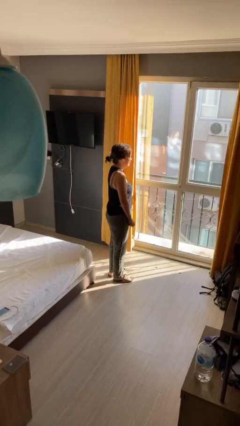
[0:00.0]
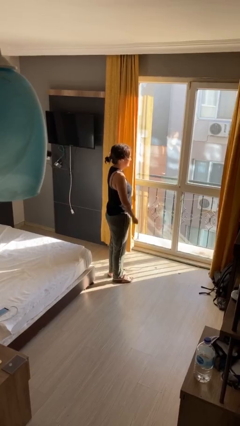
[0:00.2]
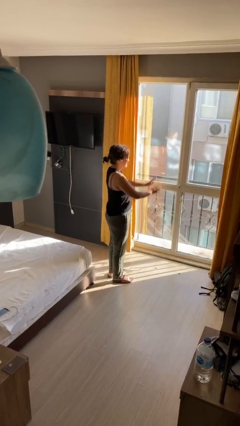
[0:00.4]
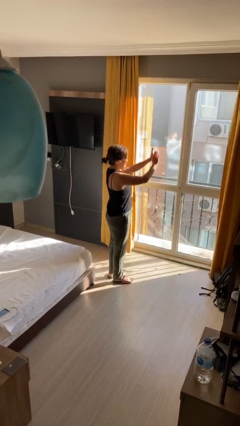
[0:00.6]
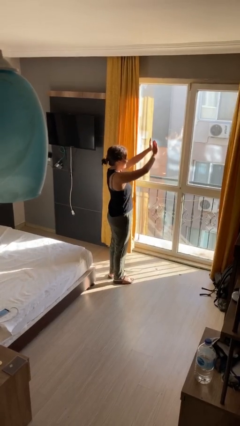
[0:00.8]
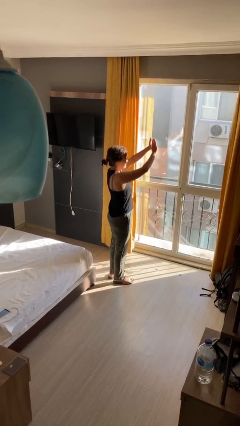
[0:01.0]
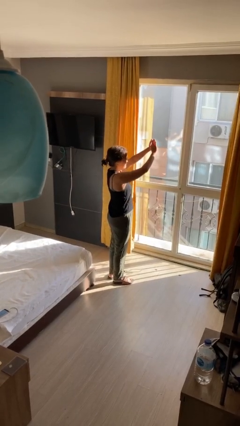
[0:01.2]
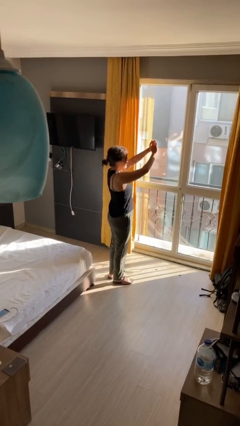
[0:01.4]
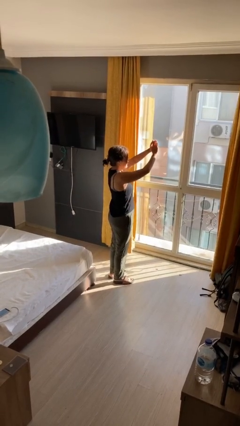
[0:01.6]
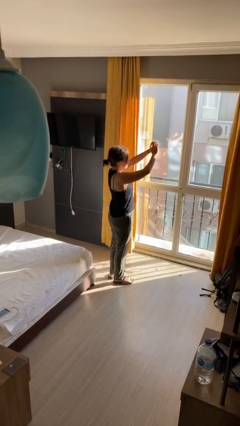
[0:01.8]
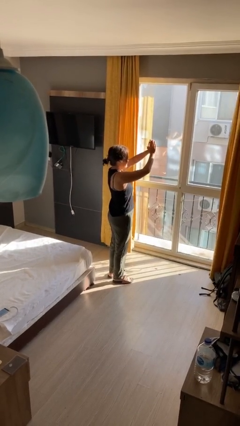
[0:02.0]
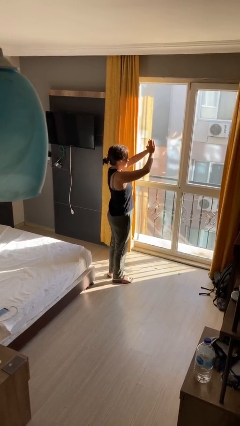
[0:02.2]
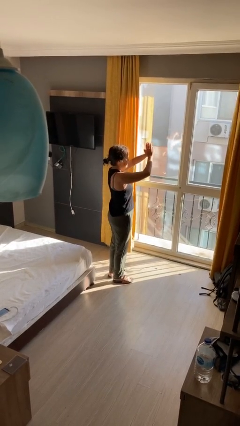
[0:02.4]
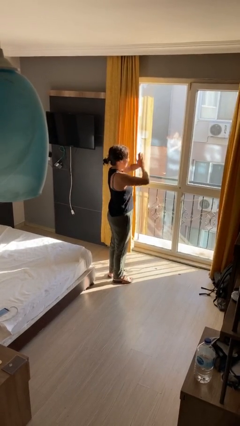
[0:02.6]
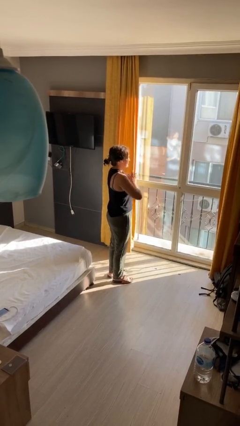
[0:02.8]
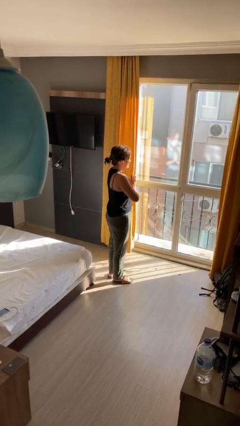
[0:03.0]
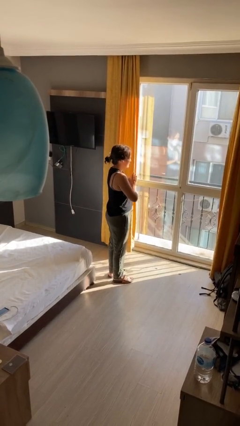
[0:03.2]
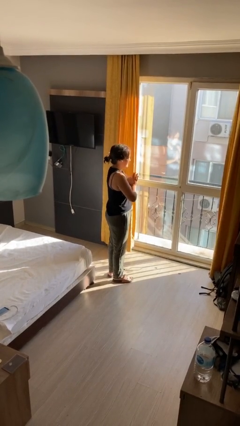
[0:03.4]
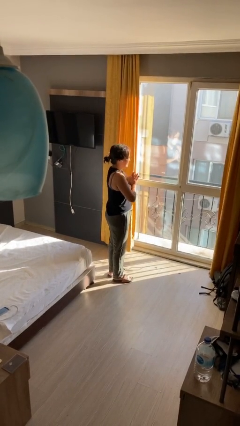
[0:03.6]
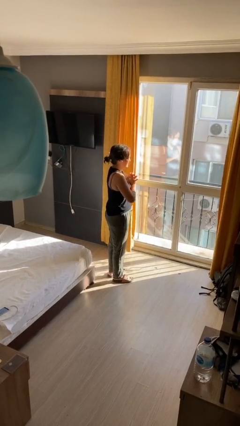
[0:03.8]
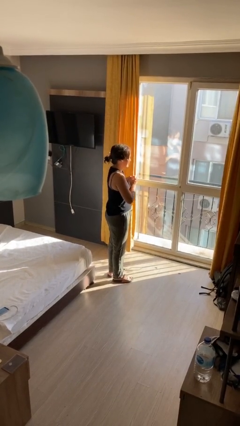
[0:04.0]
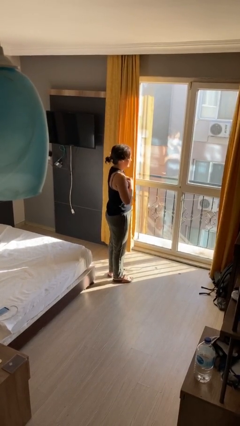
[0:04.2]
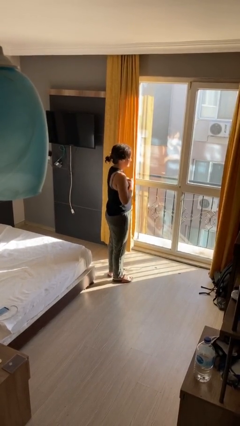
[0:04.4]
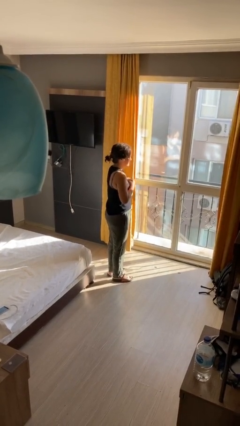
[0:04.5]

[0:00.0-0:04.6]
person prays

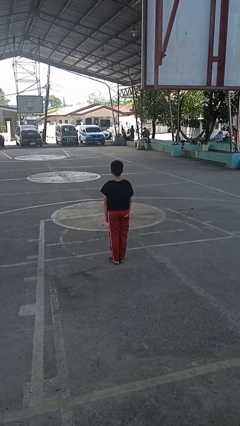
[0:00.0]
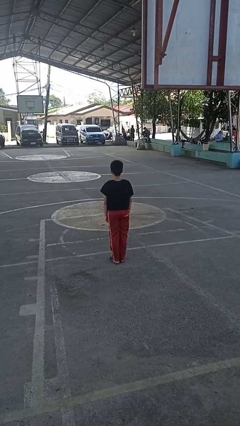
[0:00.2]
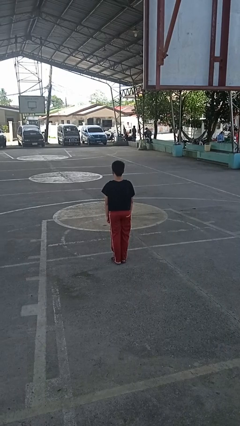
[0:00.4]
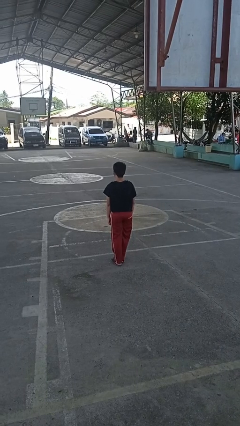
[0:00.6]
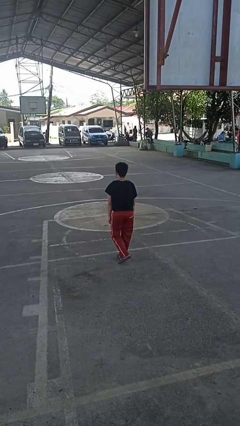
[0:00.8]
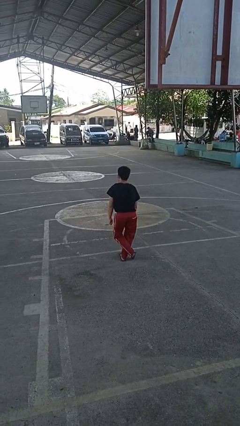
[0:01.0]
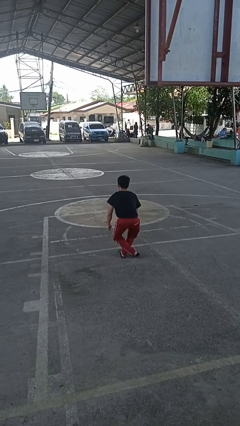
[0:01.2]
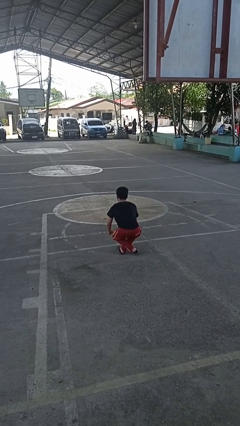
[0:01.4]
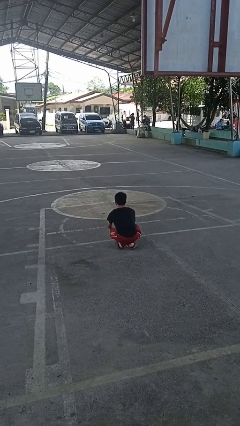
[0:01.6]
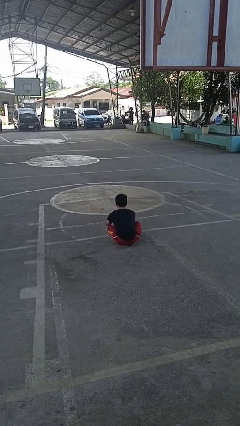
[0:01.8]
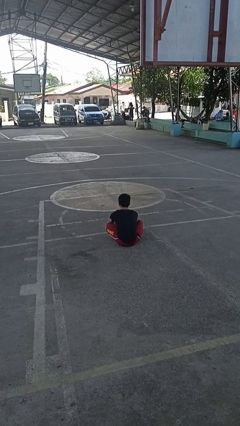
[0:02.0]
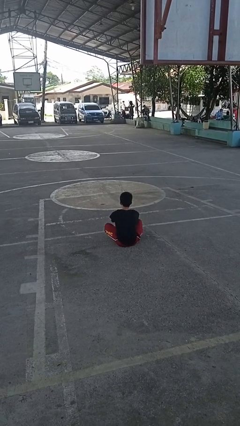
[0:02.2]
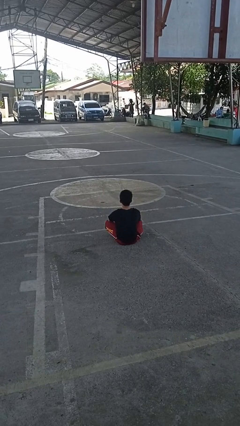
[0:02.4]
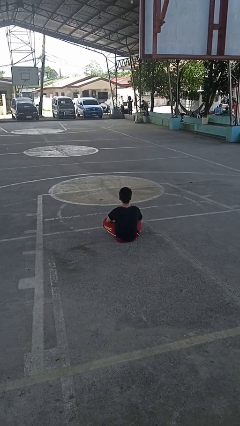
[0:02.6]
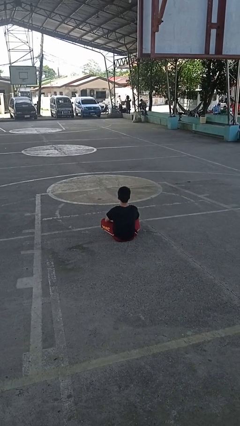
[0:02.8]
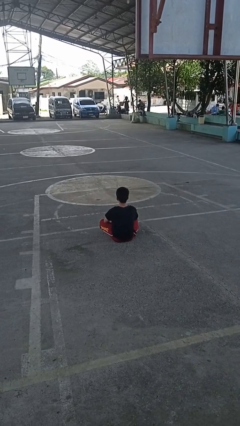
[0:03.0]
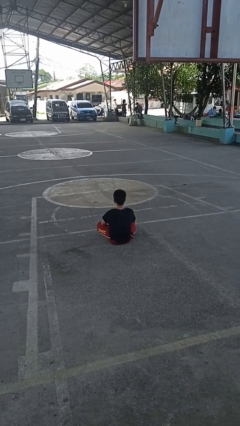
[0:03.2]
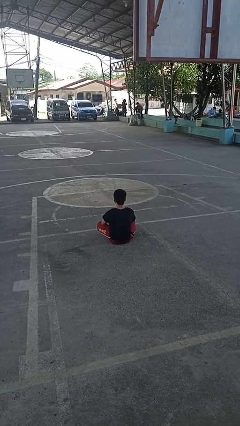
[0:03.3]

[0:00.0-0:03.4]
person sits crisscross

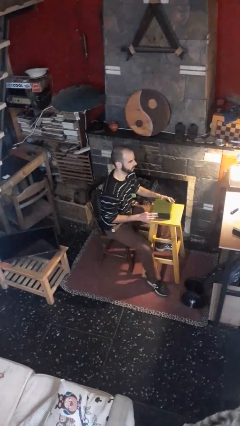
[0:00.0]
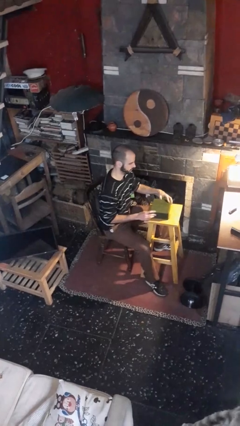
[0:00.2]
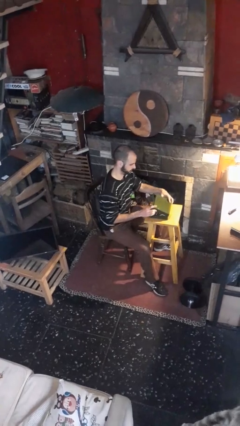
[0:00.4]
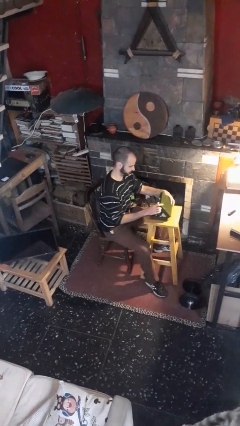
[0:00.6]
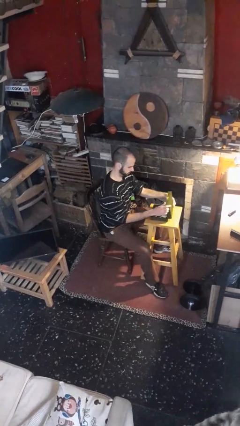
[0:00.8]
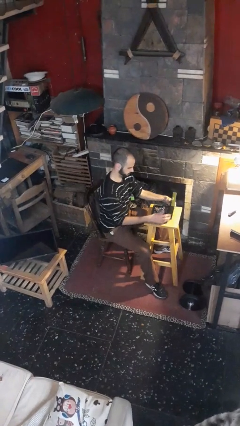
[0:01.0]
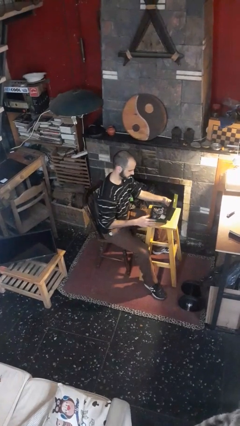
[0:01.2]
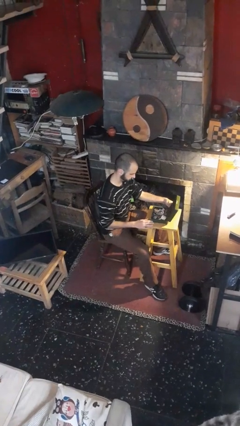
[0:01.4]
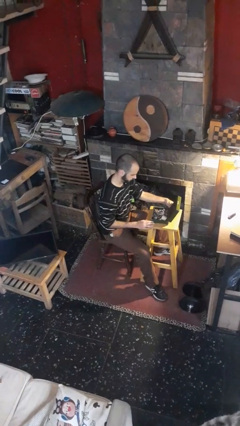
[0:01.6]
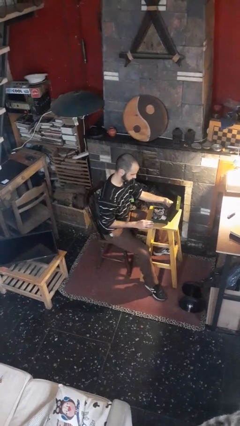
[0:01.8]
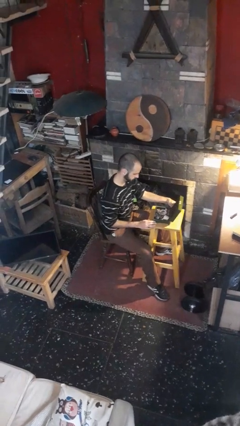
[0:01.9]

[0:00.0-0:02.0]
person opens jewelry box

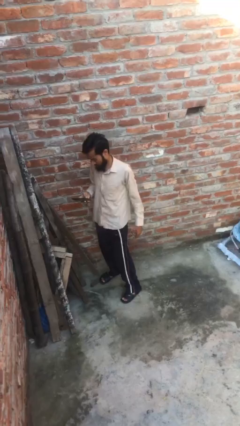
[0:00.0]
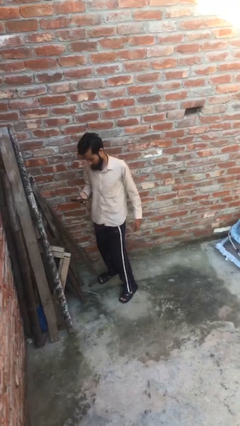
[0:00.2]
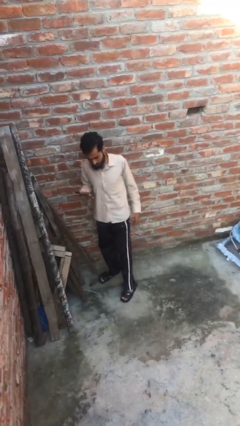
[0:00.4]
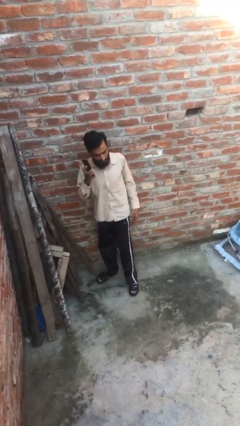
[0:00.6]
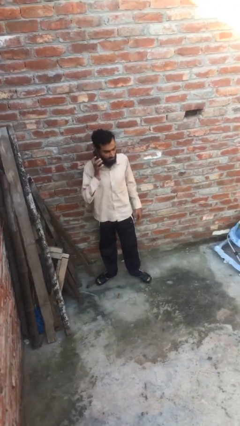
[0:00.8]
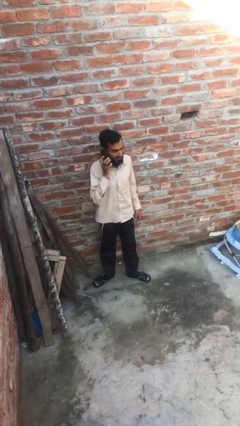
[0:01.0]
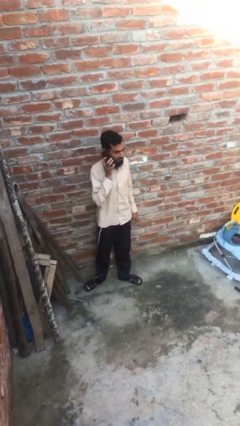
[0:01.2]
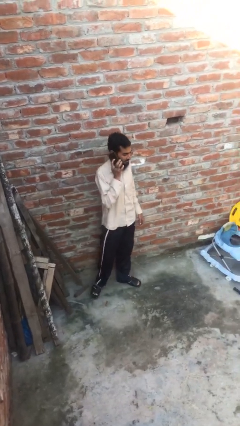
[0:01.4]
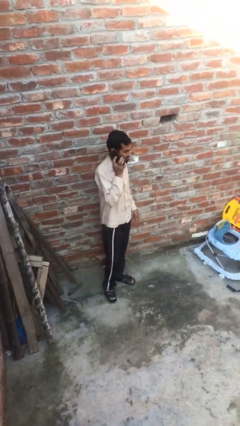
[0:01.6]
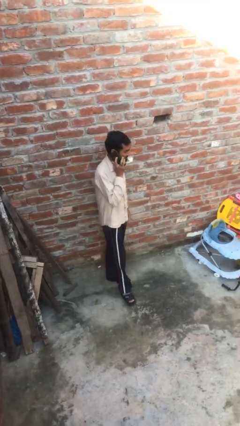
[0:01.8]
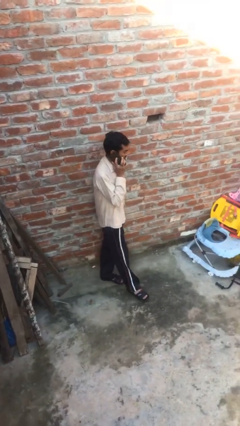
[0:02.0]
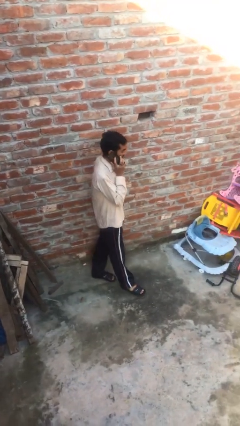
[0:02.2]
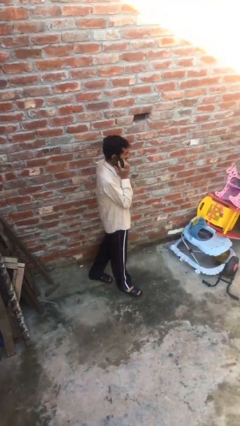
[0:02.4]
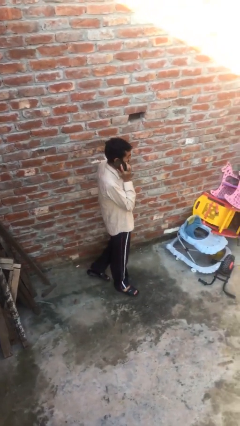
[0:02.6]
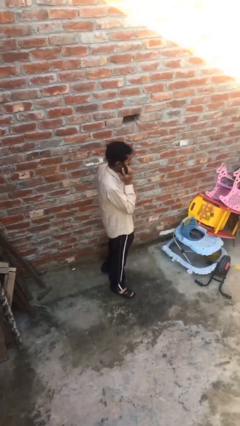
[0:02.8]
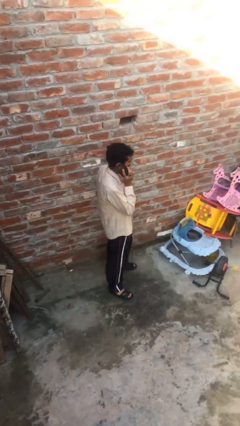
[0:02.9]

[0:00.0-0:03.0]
person talks on phone

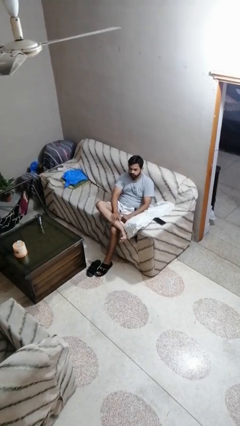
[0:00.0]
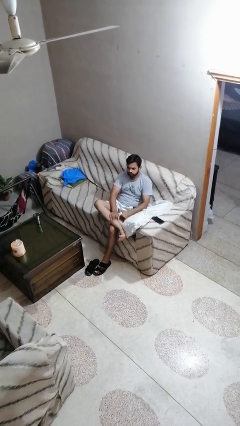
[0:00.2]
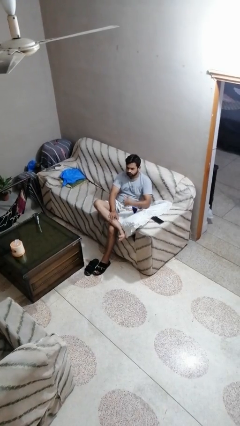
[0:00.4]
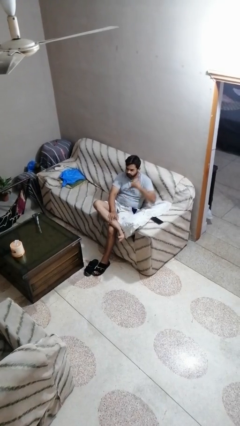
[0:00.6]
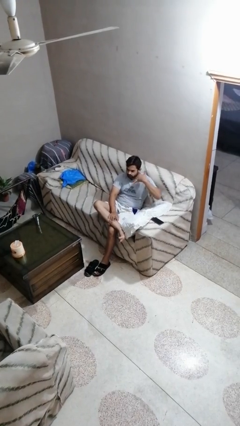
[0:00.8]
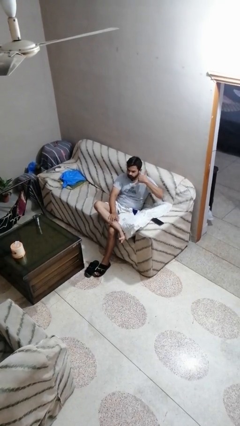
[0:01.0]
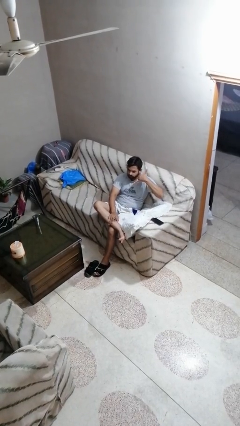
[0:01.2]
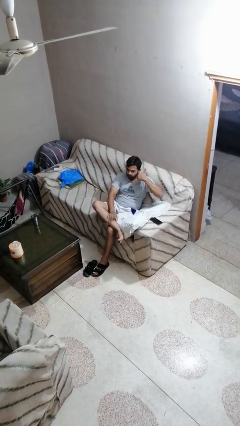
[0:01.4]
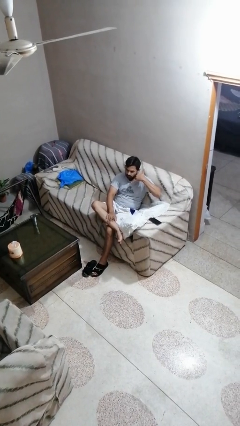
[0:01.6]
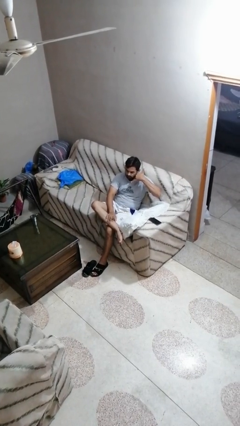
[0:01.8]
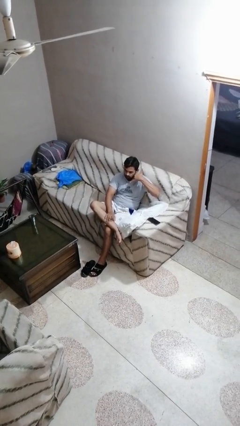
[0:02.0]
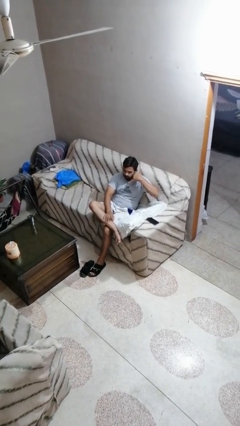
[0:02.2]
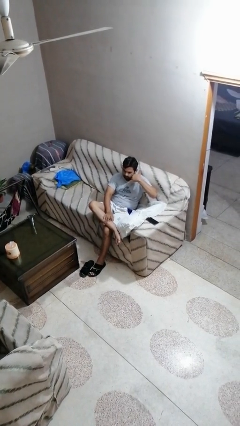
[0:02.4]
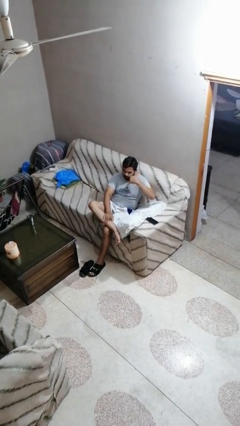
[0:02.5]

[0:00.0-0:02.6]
person gestures call me

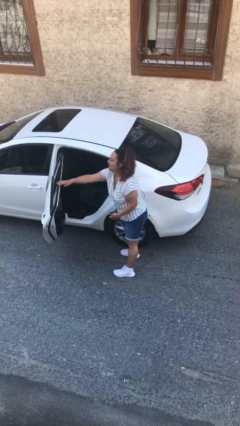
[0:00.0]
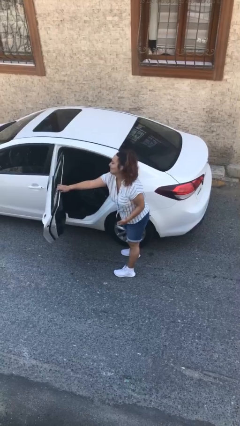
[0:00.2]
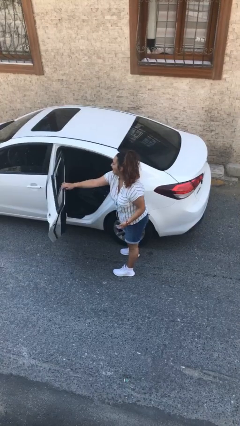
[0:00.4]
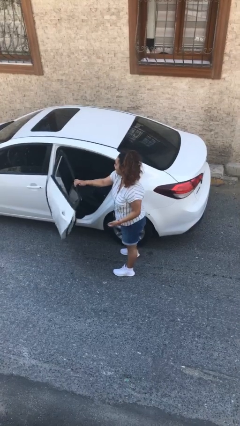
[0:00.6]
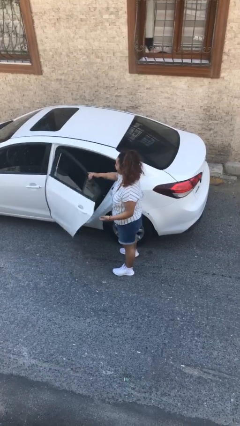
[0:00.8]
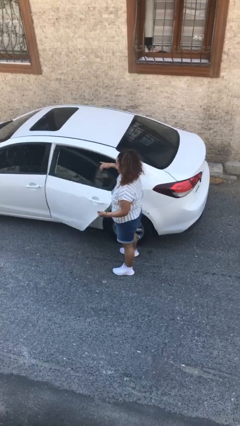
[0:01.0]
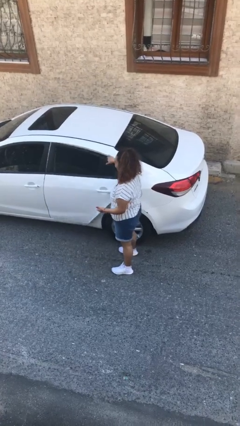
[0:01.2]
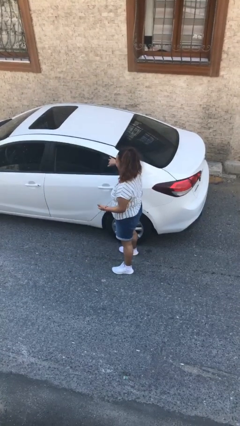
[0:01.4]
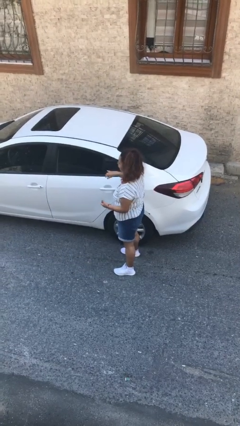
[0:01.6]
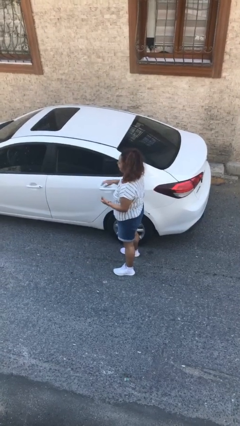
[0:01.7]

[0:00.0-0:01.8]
person closes car door
